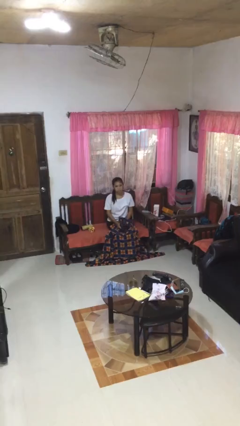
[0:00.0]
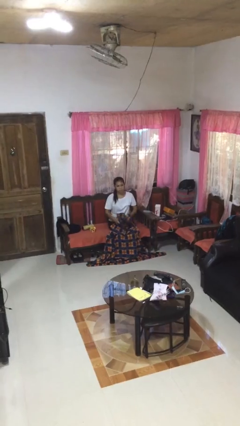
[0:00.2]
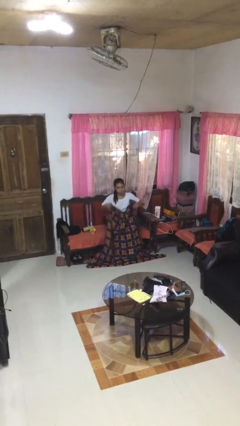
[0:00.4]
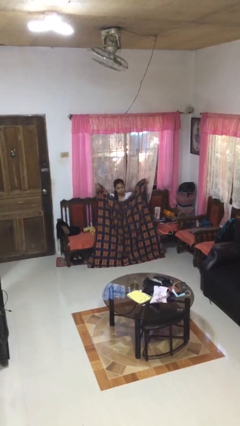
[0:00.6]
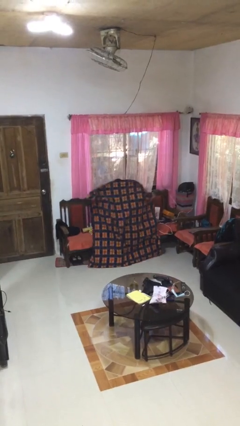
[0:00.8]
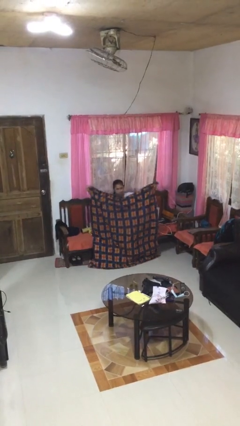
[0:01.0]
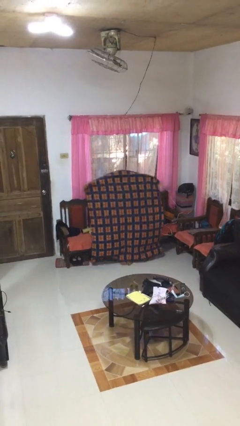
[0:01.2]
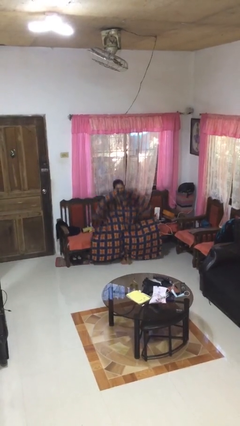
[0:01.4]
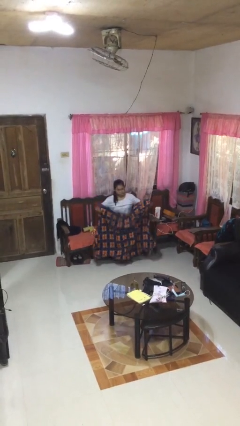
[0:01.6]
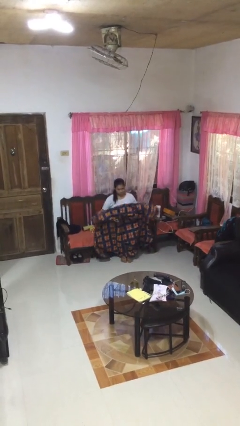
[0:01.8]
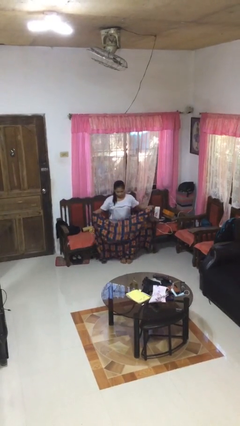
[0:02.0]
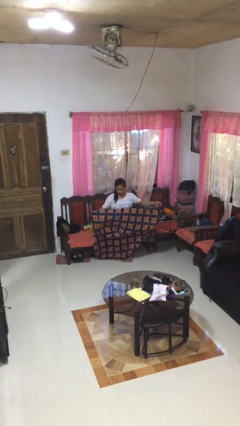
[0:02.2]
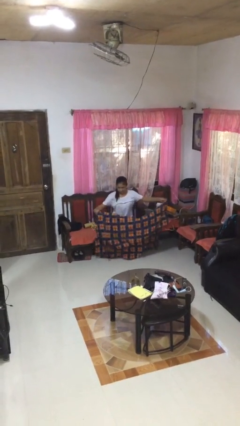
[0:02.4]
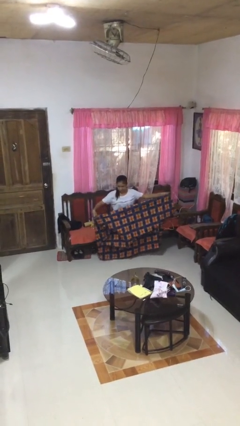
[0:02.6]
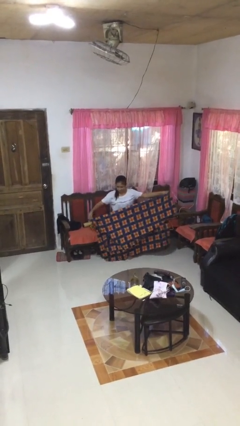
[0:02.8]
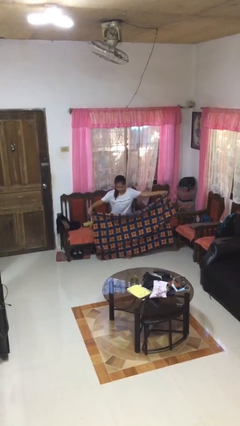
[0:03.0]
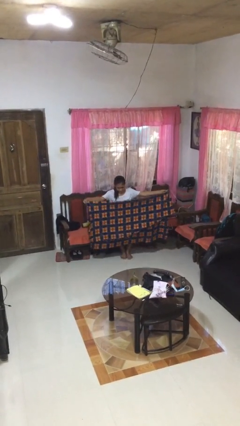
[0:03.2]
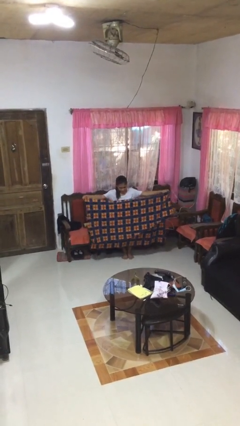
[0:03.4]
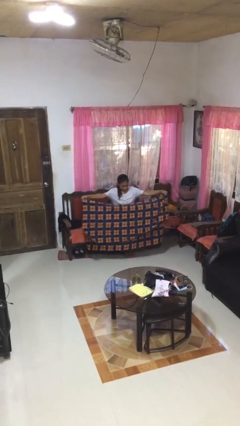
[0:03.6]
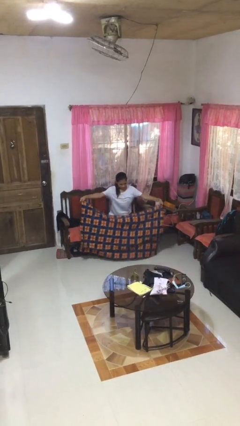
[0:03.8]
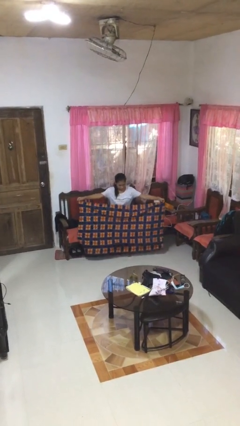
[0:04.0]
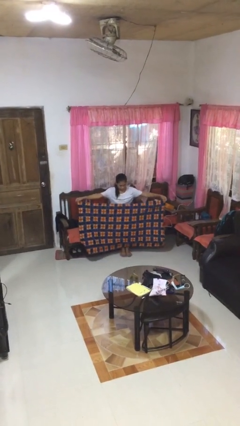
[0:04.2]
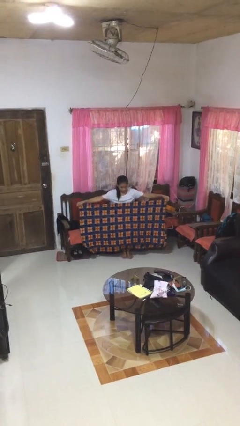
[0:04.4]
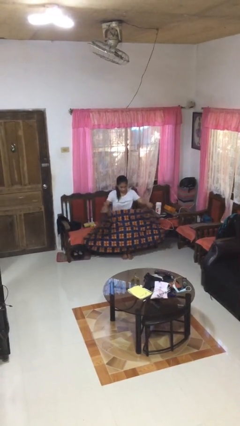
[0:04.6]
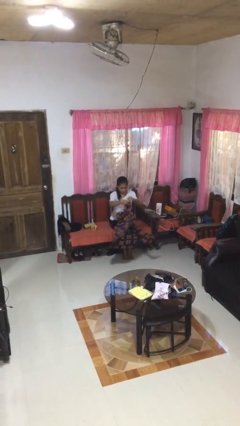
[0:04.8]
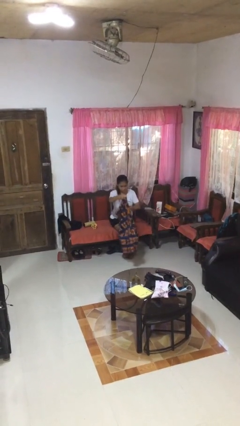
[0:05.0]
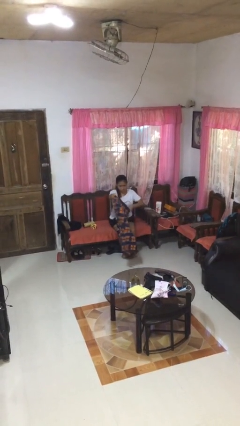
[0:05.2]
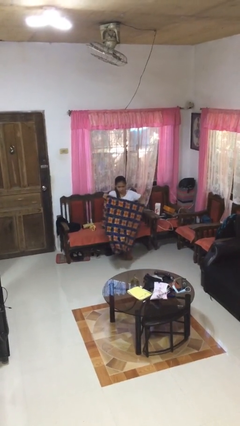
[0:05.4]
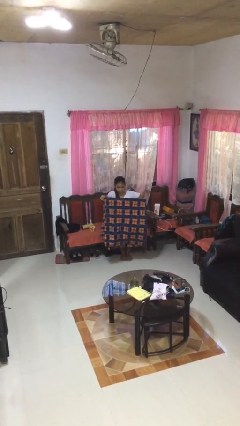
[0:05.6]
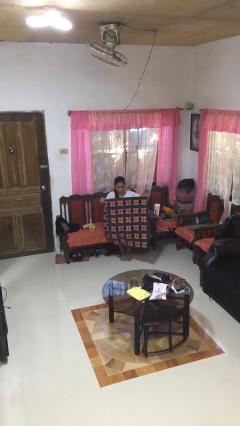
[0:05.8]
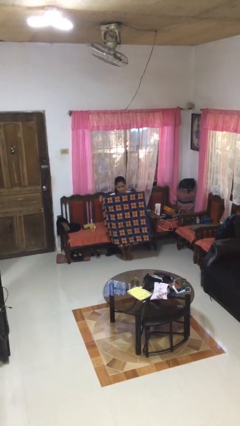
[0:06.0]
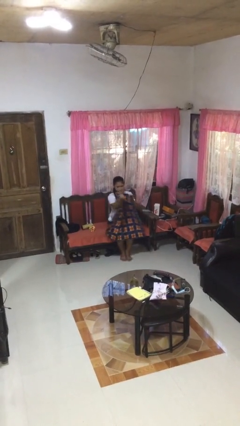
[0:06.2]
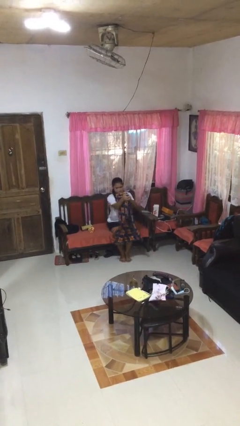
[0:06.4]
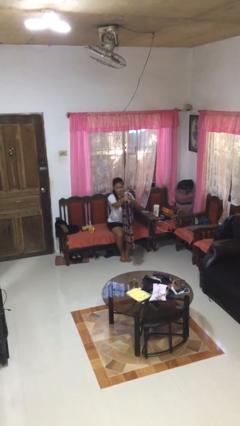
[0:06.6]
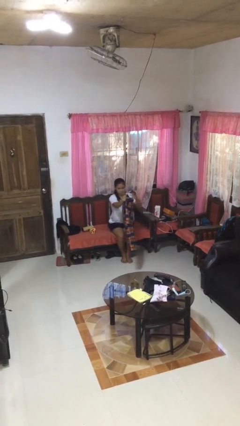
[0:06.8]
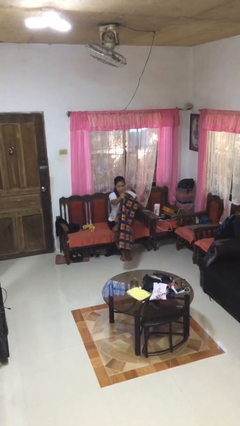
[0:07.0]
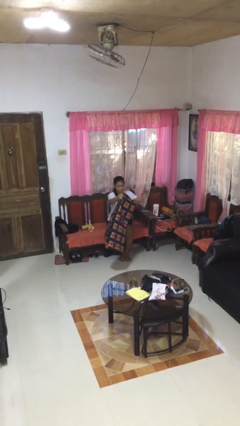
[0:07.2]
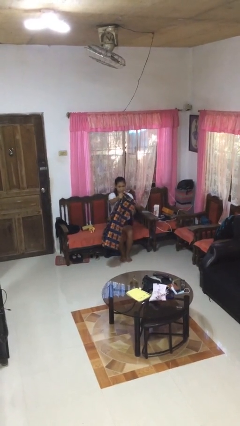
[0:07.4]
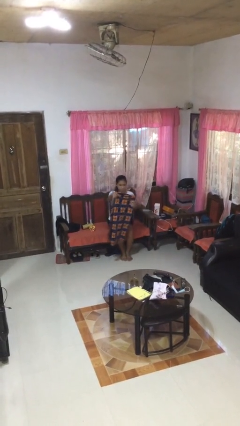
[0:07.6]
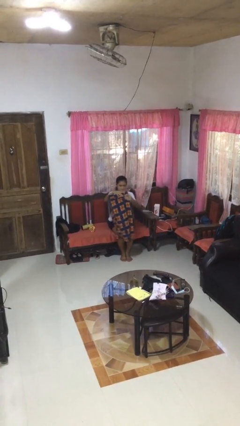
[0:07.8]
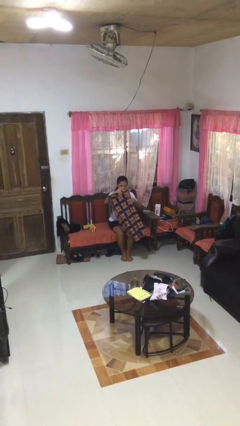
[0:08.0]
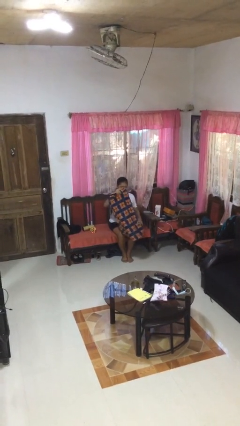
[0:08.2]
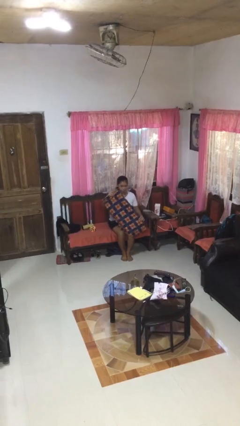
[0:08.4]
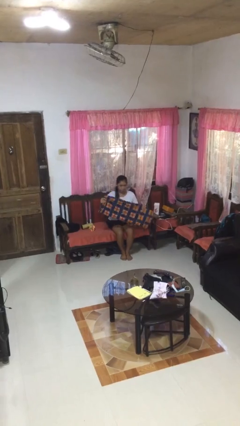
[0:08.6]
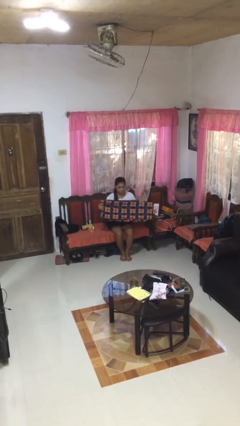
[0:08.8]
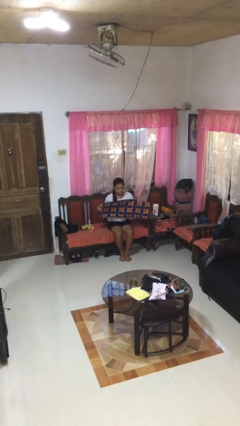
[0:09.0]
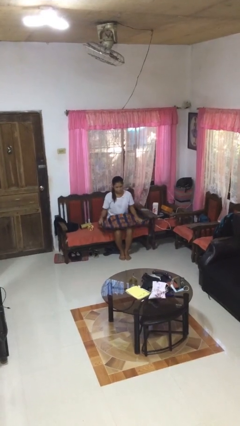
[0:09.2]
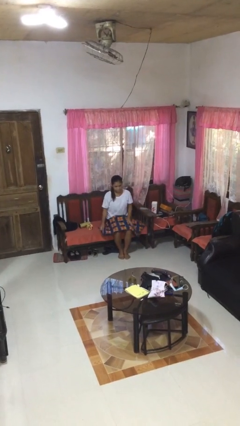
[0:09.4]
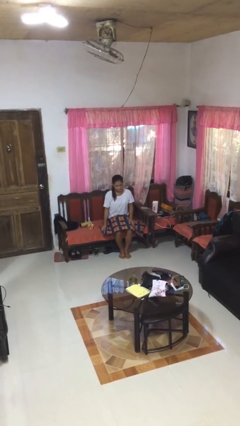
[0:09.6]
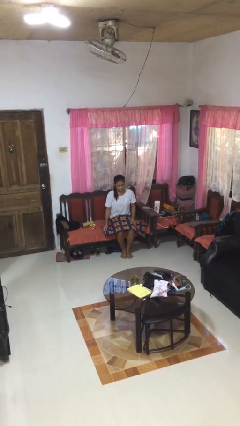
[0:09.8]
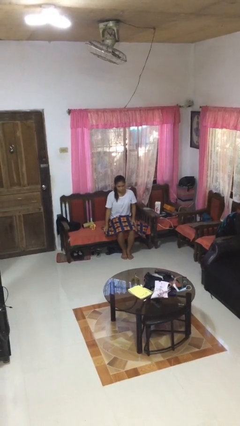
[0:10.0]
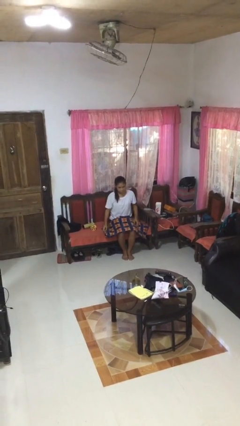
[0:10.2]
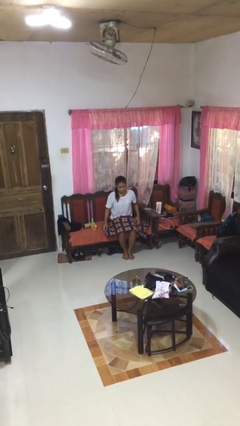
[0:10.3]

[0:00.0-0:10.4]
person folds blanket

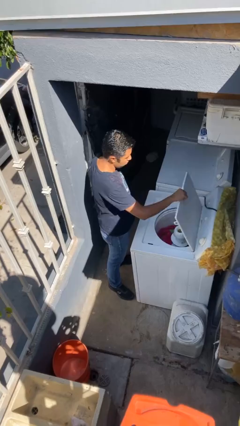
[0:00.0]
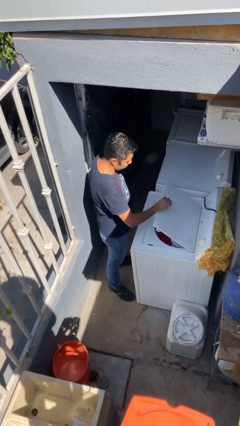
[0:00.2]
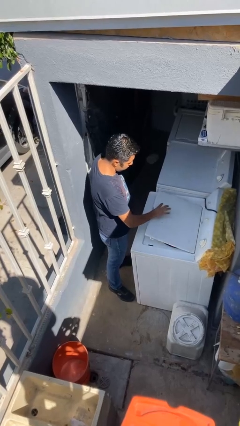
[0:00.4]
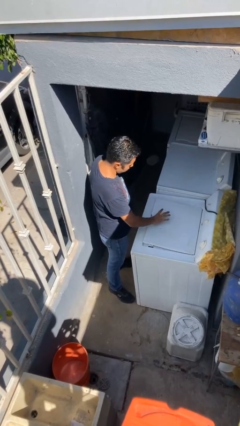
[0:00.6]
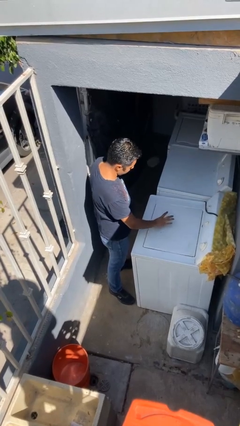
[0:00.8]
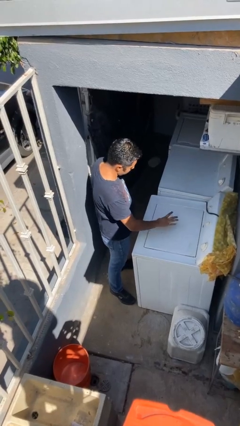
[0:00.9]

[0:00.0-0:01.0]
person closes clothes washer

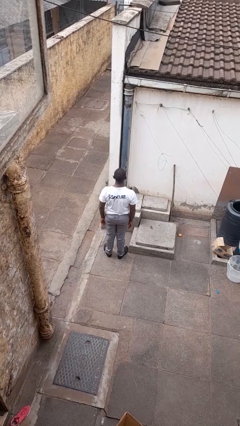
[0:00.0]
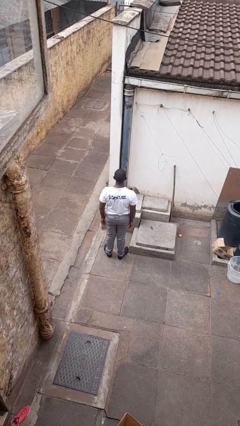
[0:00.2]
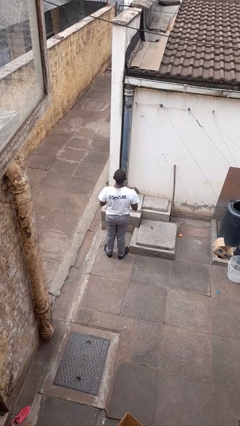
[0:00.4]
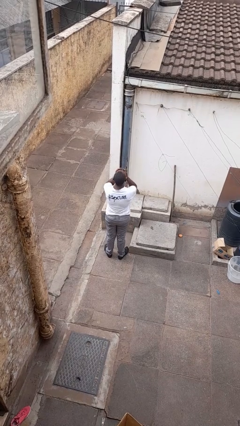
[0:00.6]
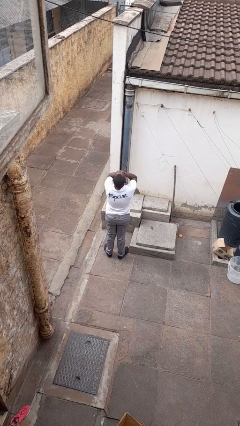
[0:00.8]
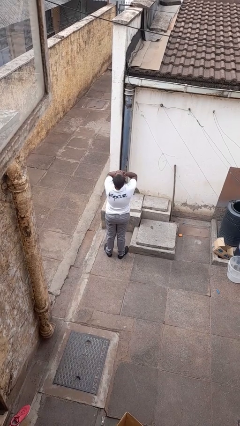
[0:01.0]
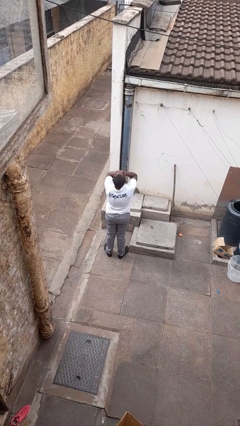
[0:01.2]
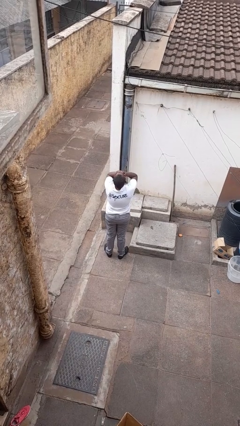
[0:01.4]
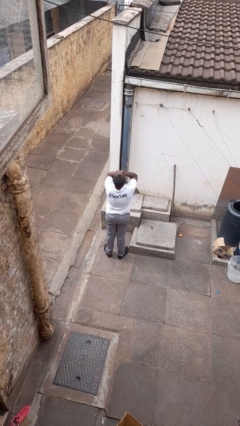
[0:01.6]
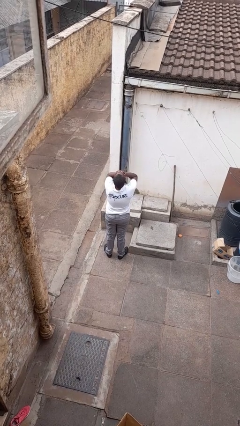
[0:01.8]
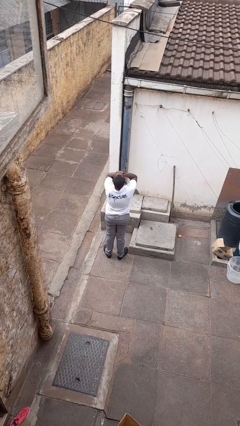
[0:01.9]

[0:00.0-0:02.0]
person covers face with hands

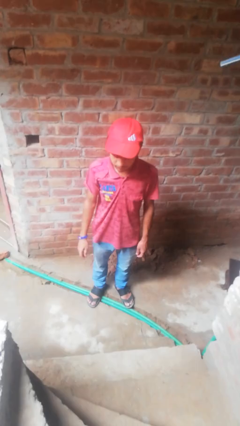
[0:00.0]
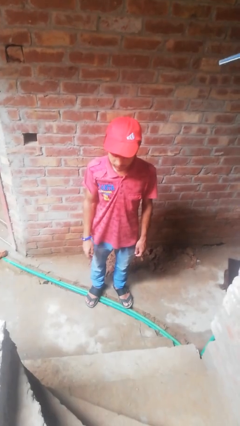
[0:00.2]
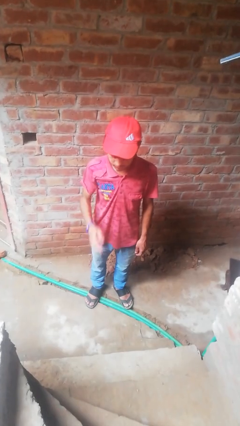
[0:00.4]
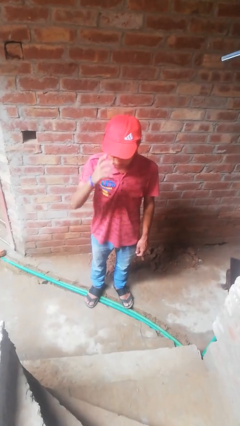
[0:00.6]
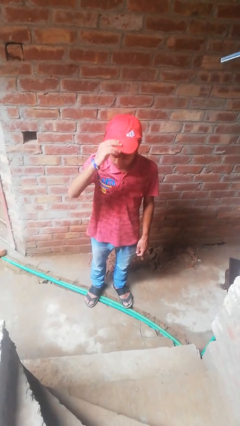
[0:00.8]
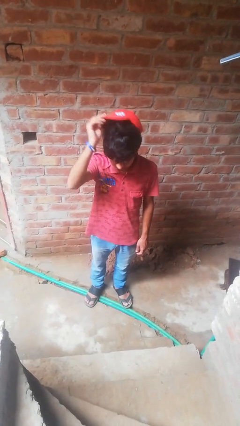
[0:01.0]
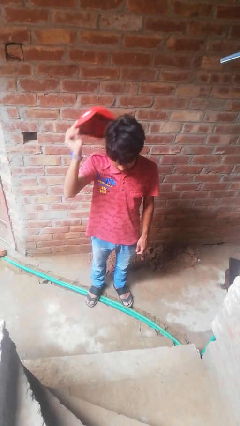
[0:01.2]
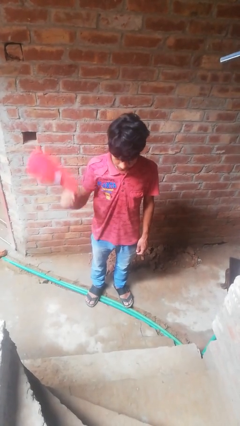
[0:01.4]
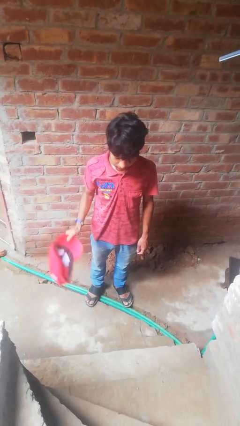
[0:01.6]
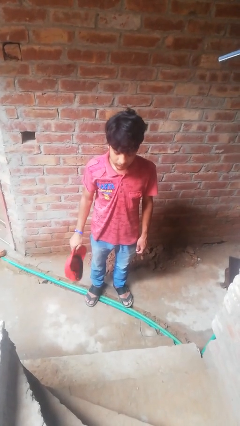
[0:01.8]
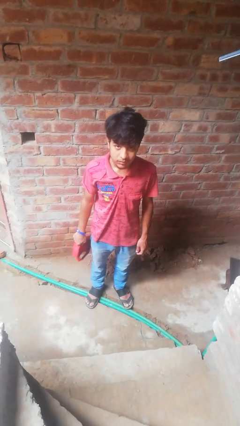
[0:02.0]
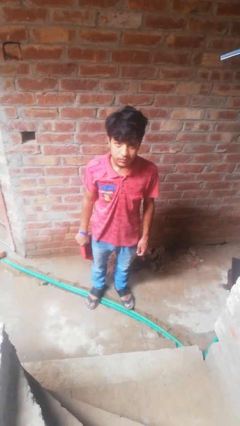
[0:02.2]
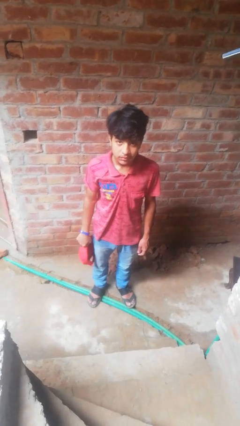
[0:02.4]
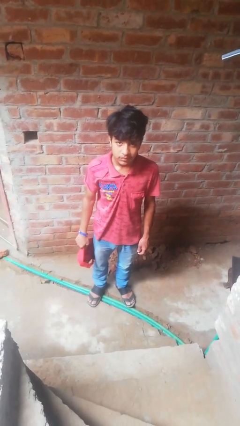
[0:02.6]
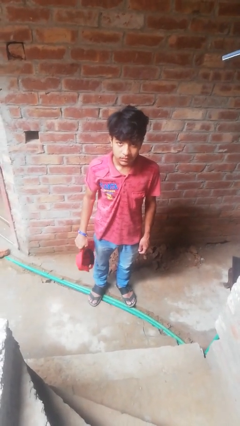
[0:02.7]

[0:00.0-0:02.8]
person takes off hat

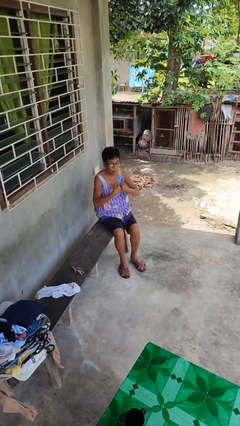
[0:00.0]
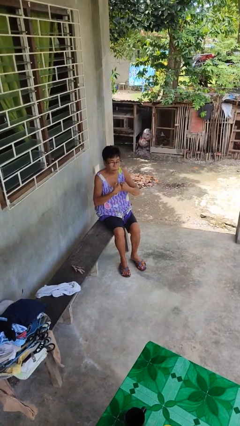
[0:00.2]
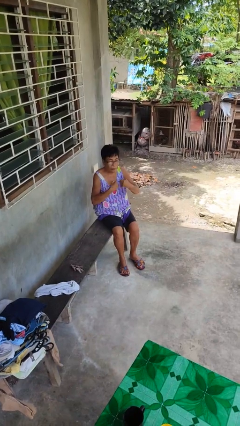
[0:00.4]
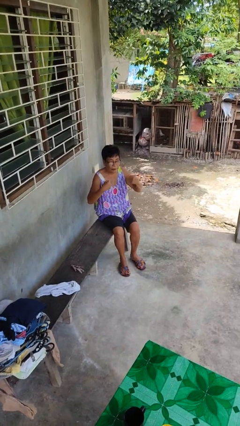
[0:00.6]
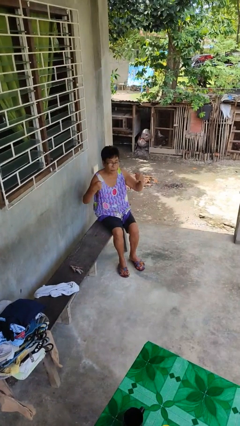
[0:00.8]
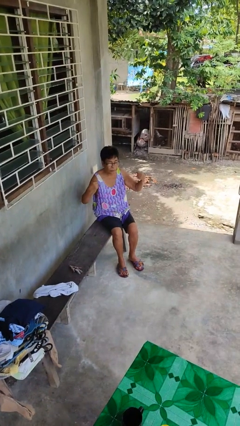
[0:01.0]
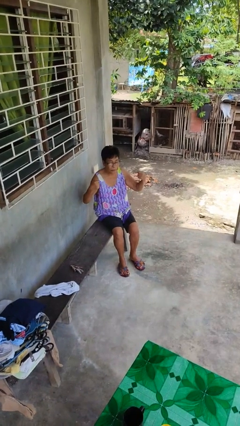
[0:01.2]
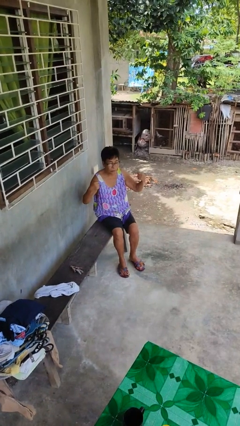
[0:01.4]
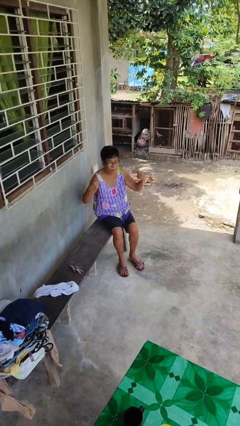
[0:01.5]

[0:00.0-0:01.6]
person gestures zoom in
